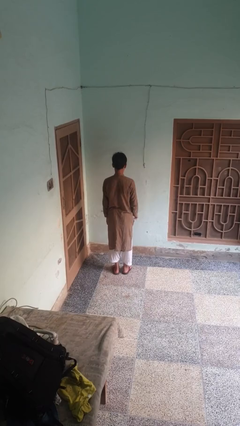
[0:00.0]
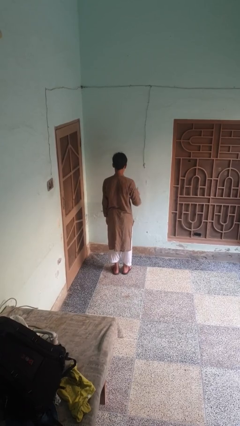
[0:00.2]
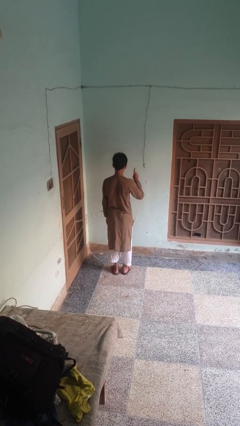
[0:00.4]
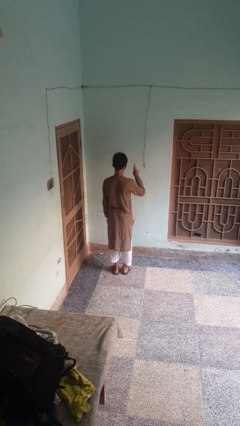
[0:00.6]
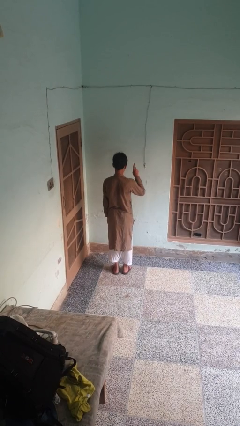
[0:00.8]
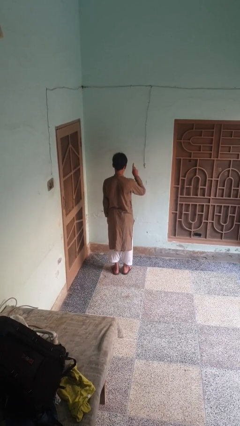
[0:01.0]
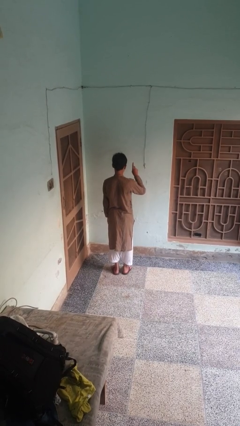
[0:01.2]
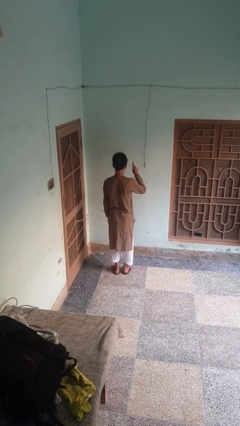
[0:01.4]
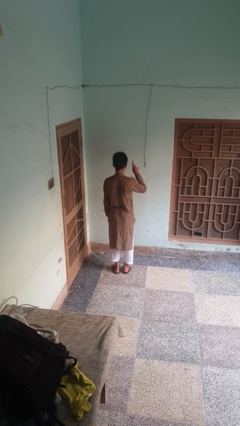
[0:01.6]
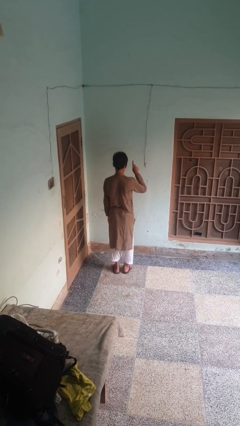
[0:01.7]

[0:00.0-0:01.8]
person gestures number one

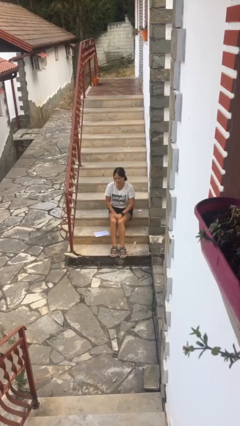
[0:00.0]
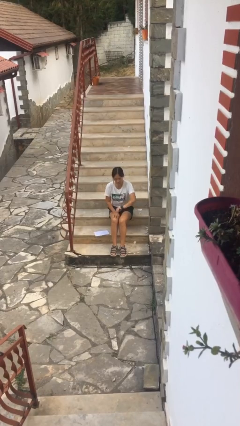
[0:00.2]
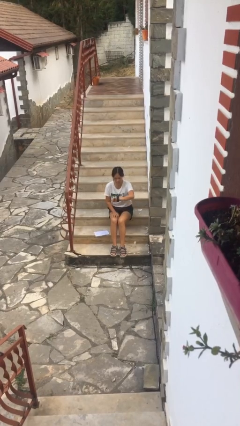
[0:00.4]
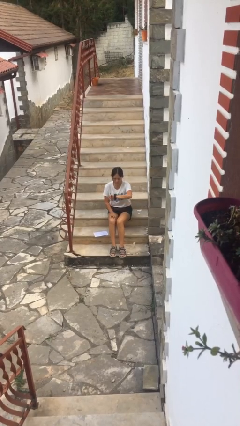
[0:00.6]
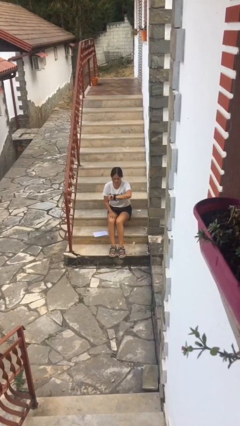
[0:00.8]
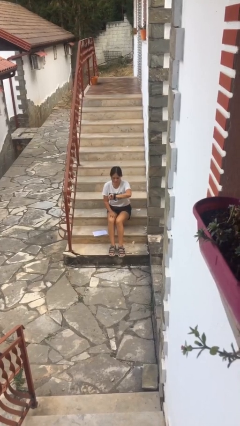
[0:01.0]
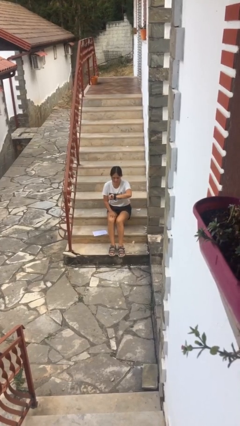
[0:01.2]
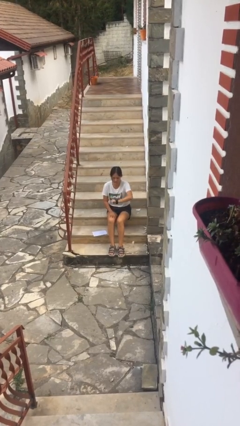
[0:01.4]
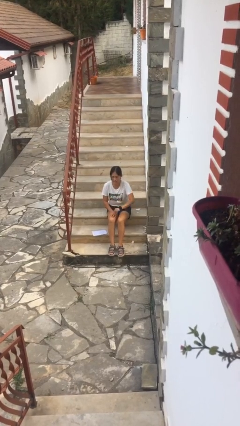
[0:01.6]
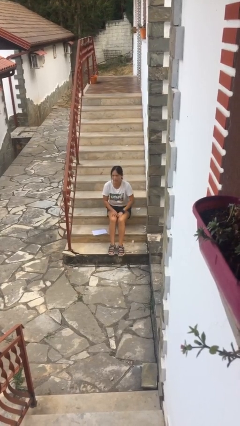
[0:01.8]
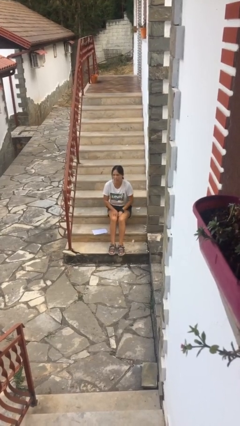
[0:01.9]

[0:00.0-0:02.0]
person looks at wristwatch

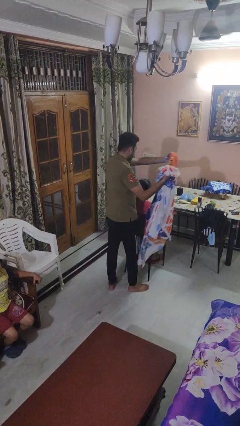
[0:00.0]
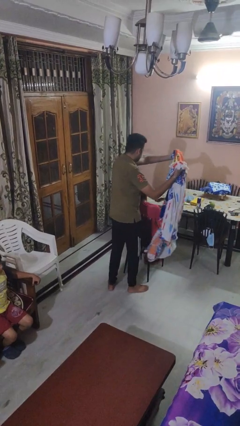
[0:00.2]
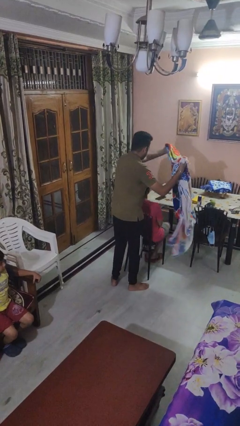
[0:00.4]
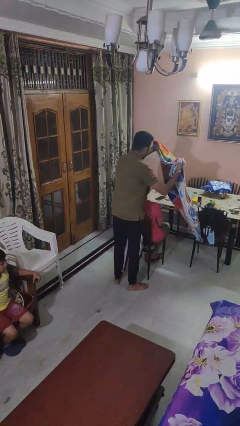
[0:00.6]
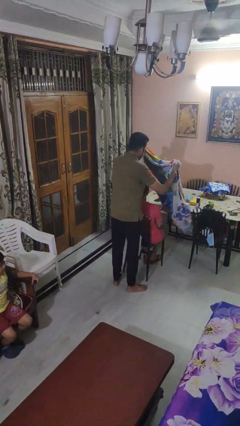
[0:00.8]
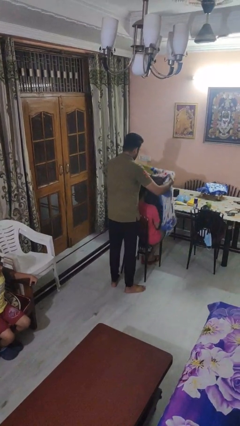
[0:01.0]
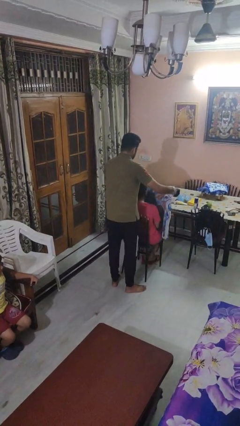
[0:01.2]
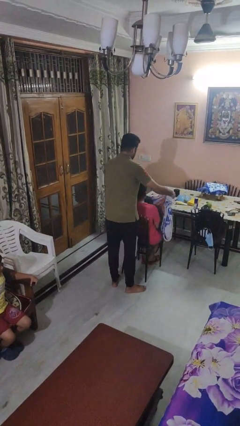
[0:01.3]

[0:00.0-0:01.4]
person covers friend with blanket

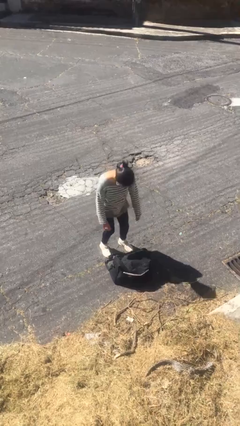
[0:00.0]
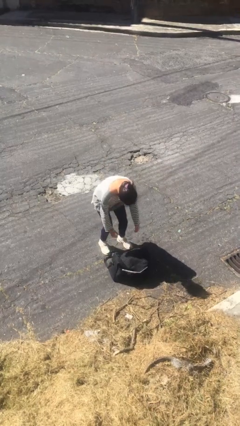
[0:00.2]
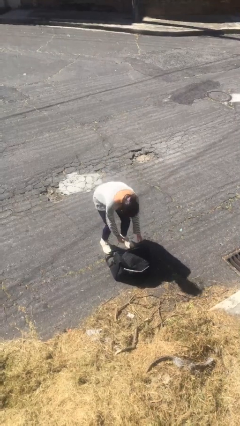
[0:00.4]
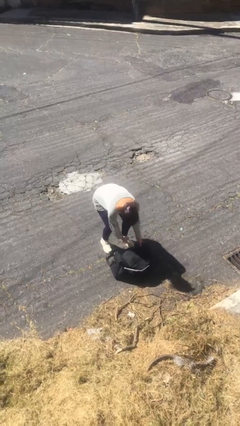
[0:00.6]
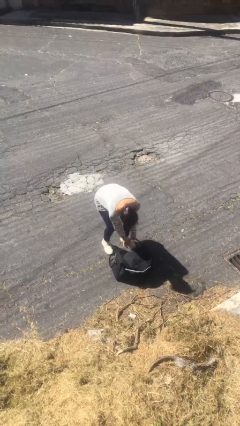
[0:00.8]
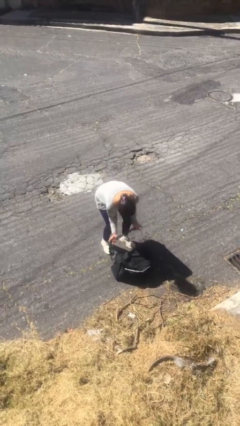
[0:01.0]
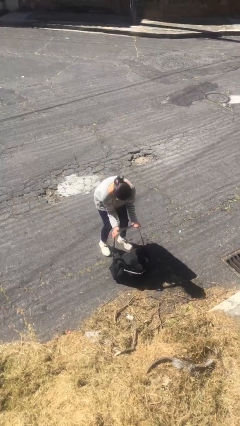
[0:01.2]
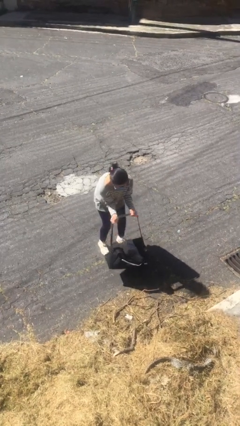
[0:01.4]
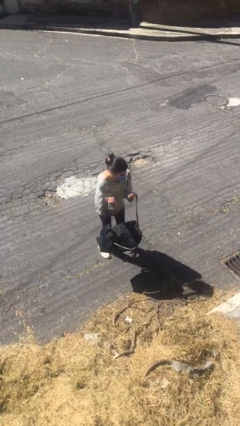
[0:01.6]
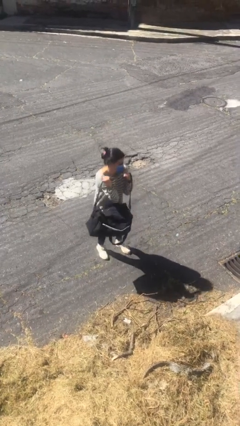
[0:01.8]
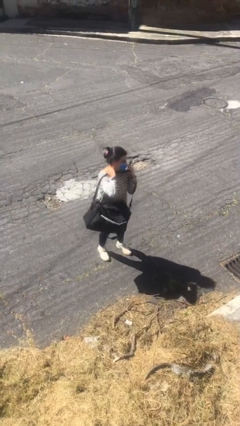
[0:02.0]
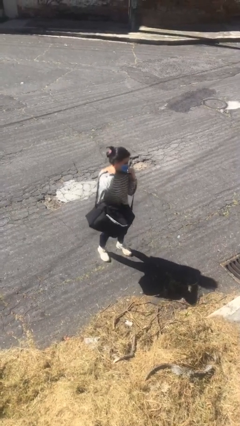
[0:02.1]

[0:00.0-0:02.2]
person picks up object from floor

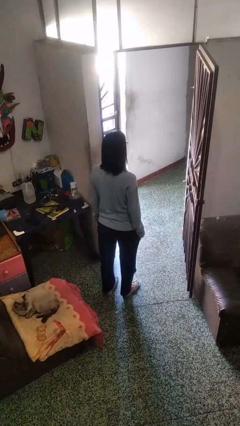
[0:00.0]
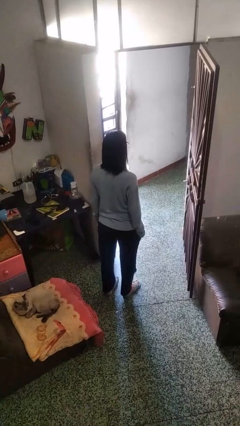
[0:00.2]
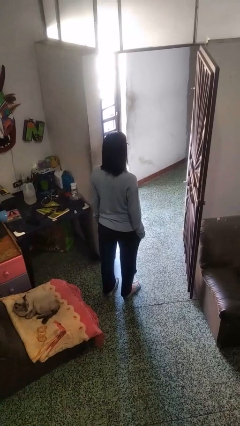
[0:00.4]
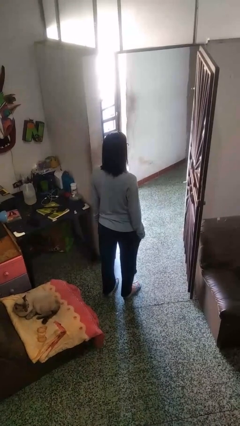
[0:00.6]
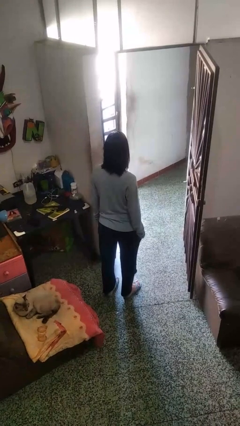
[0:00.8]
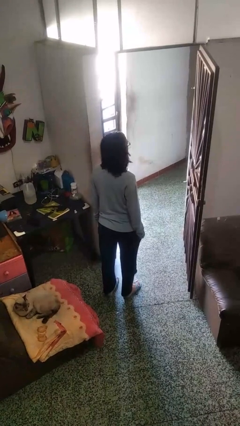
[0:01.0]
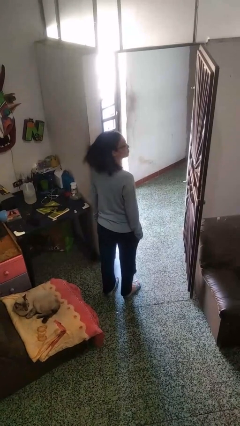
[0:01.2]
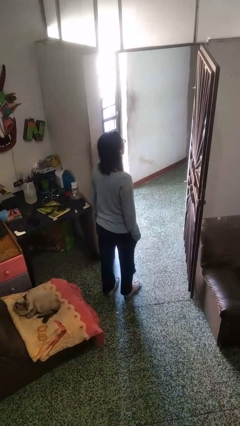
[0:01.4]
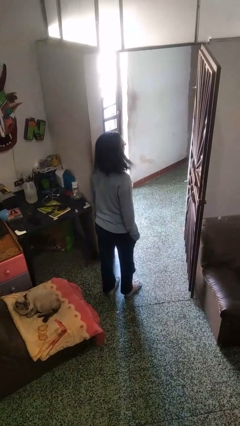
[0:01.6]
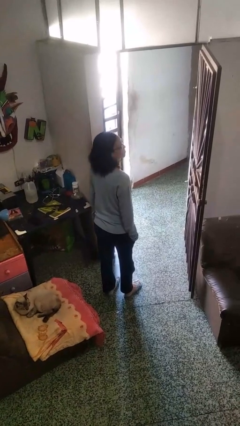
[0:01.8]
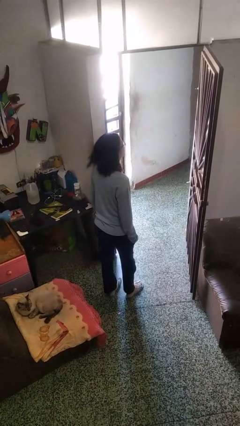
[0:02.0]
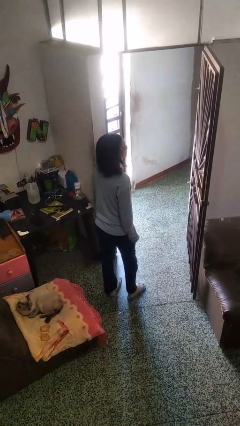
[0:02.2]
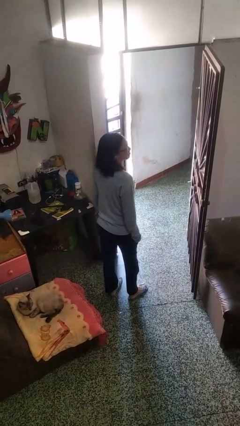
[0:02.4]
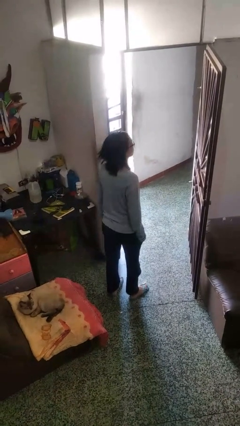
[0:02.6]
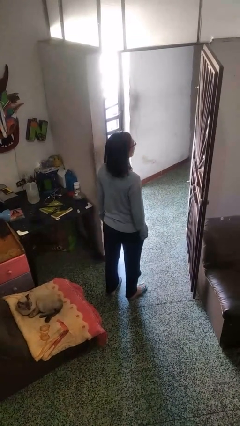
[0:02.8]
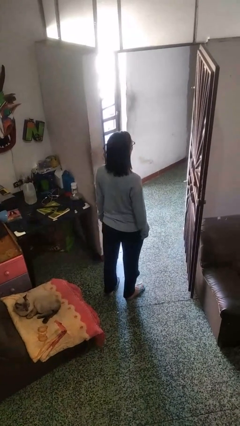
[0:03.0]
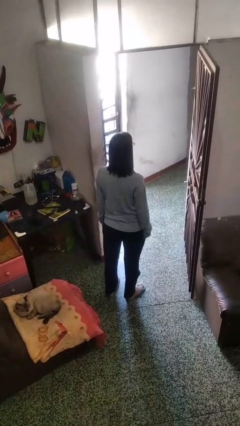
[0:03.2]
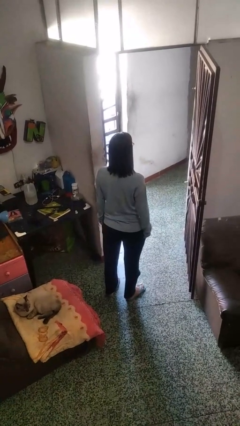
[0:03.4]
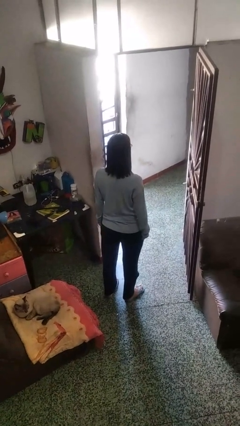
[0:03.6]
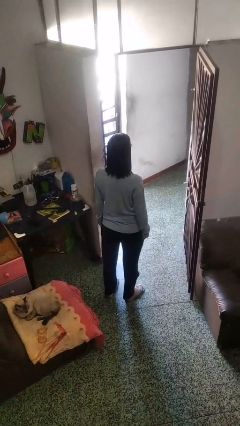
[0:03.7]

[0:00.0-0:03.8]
person shakes head

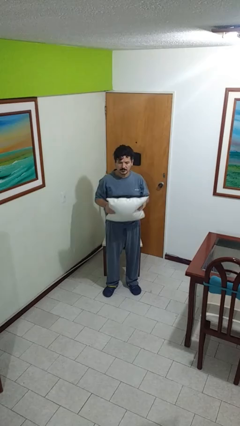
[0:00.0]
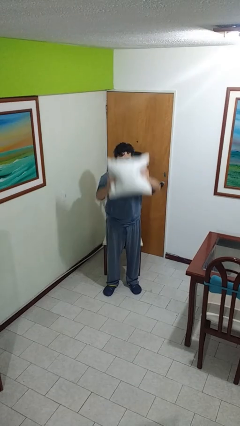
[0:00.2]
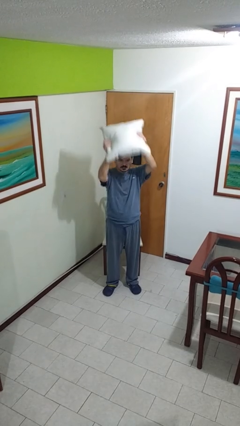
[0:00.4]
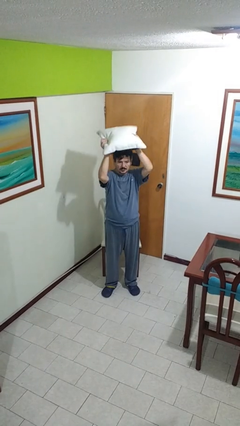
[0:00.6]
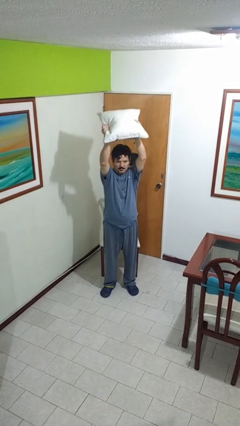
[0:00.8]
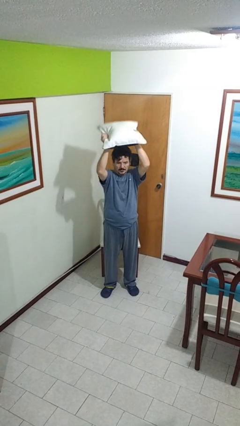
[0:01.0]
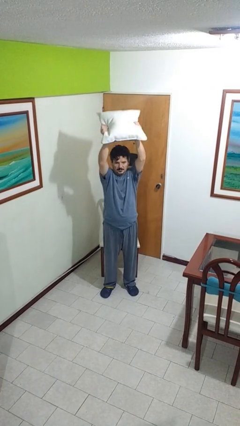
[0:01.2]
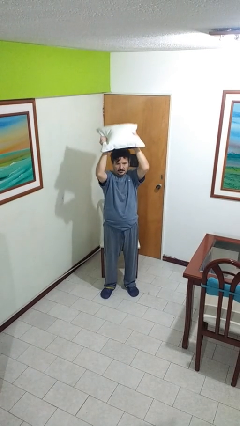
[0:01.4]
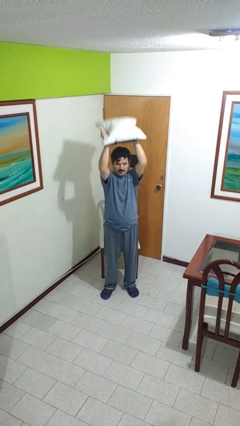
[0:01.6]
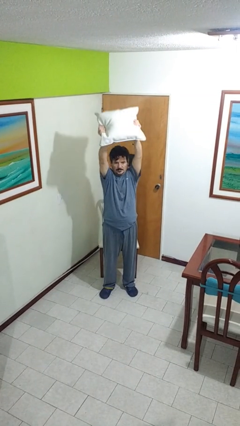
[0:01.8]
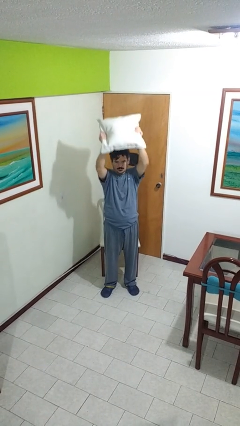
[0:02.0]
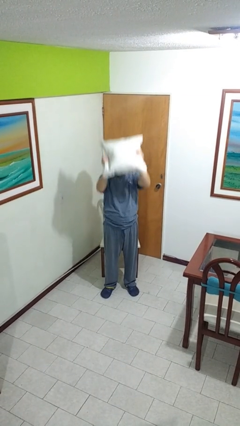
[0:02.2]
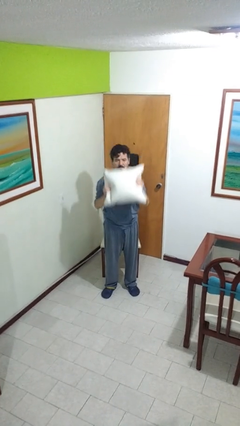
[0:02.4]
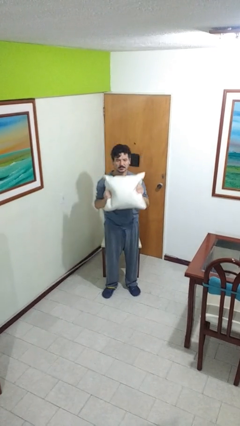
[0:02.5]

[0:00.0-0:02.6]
person holds object above head

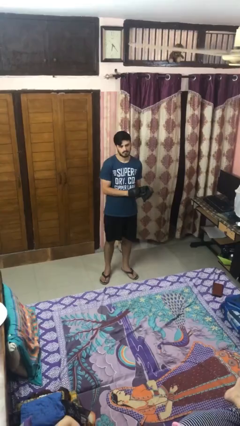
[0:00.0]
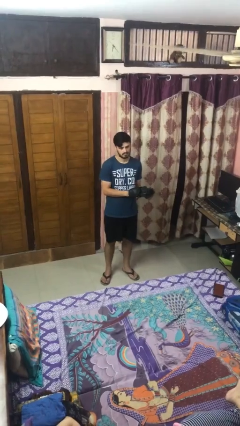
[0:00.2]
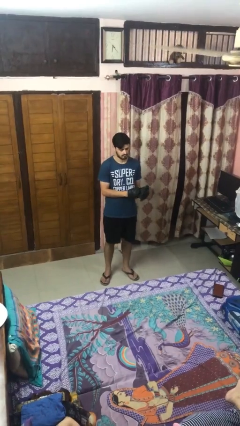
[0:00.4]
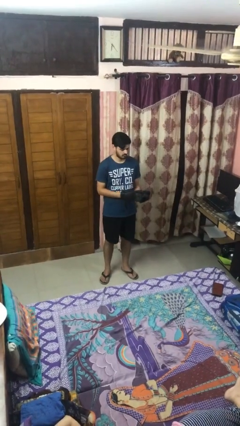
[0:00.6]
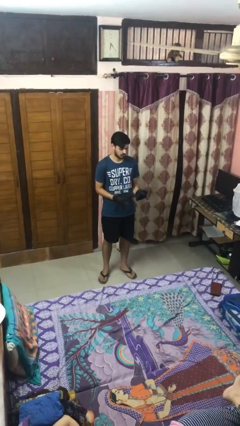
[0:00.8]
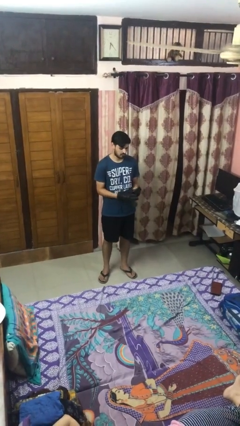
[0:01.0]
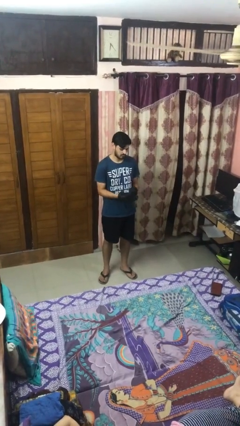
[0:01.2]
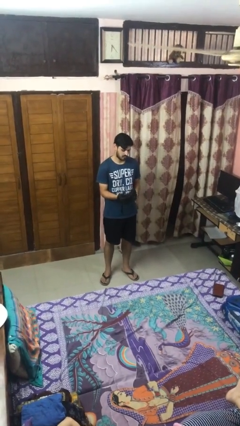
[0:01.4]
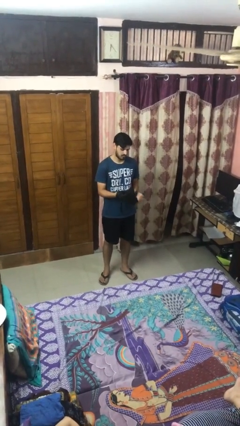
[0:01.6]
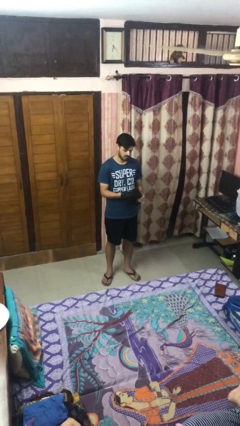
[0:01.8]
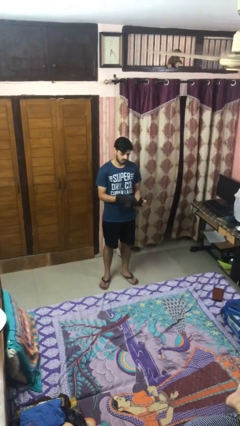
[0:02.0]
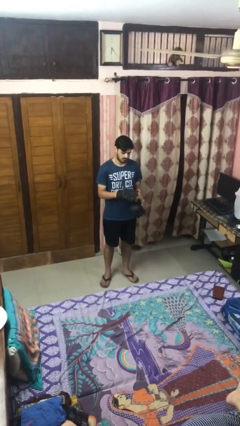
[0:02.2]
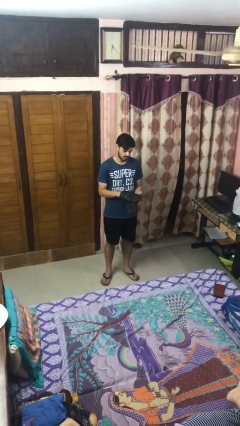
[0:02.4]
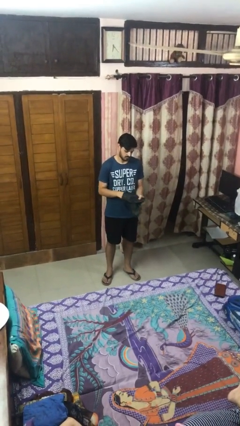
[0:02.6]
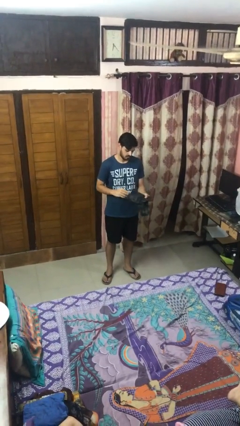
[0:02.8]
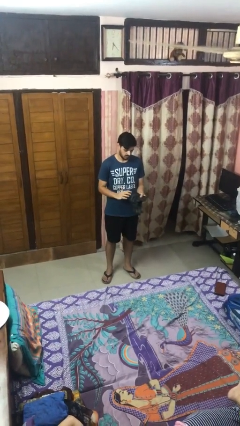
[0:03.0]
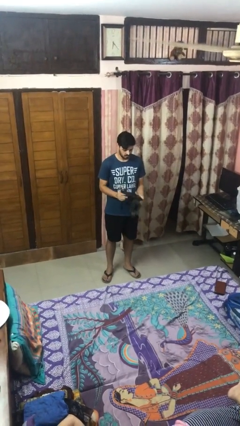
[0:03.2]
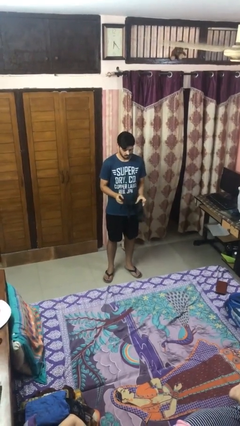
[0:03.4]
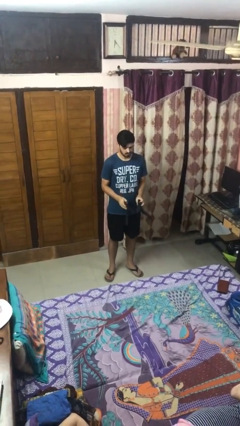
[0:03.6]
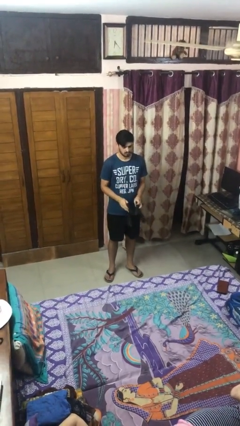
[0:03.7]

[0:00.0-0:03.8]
person takes off gloves
